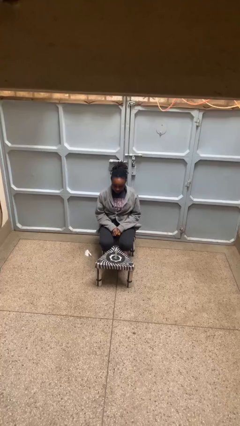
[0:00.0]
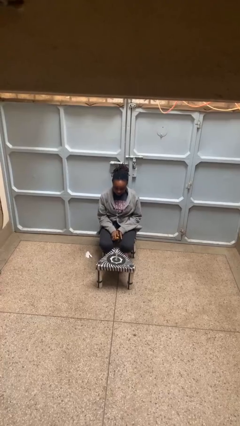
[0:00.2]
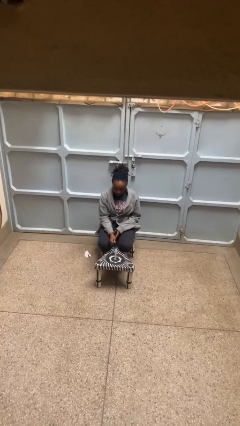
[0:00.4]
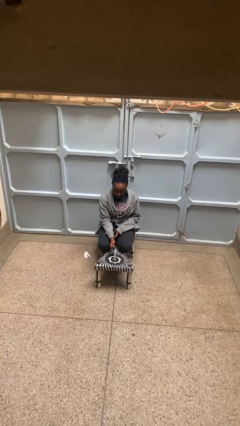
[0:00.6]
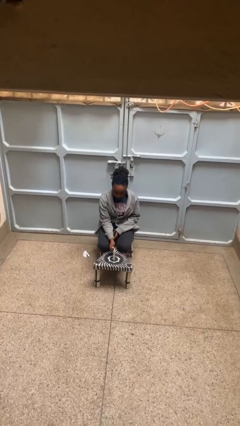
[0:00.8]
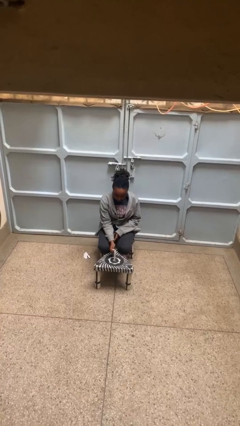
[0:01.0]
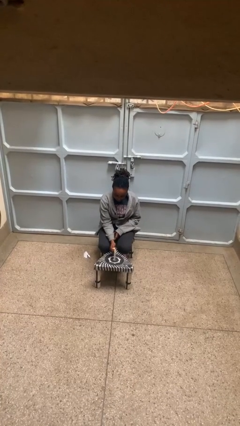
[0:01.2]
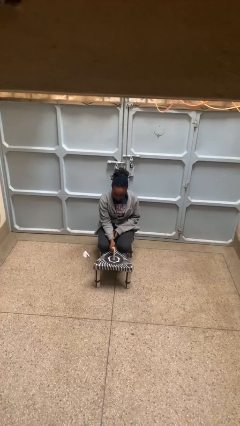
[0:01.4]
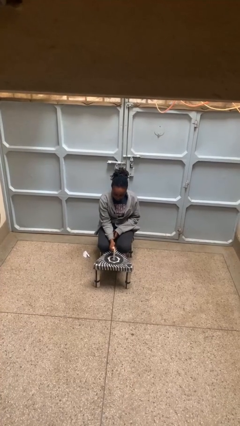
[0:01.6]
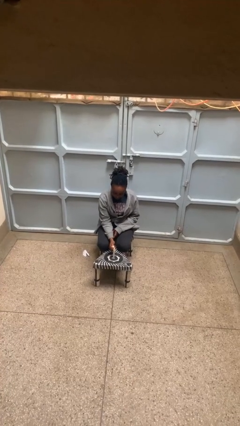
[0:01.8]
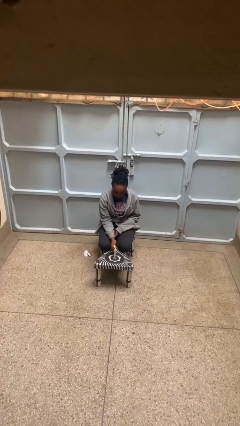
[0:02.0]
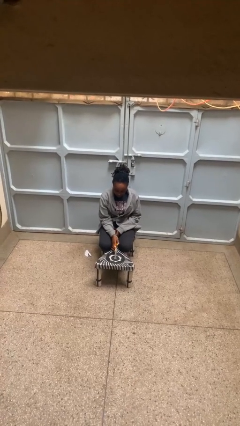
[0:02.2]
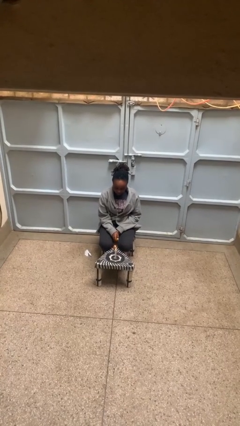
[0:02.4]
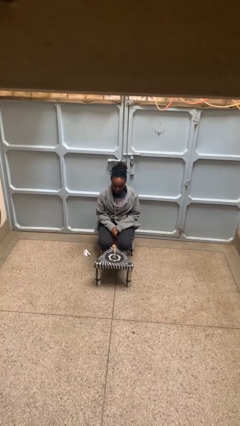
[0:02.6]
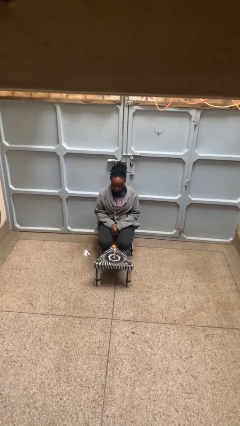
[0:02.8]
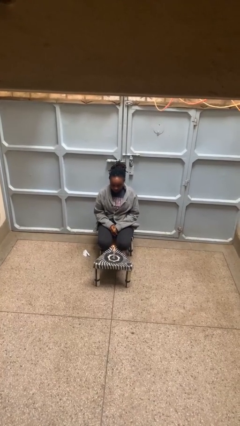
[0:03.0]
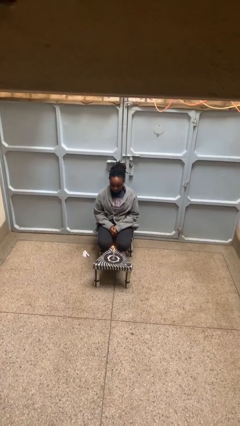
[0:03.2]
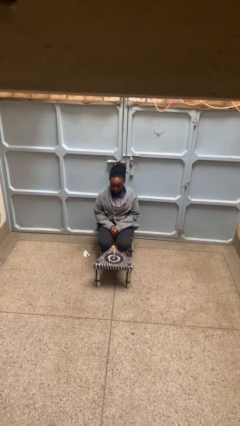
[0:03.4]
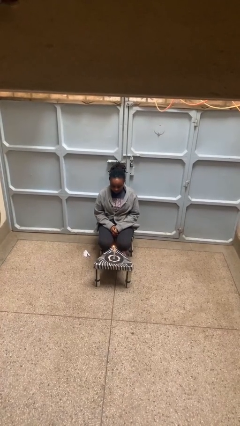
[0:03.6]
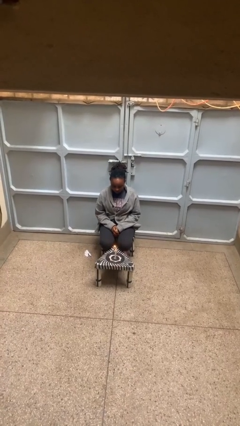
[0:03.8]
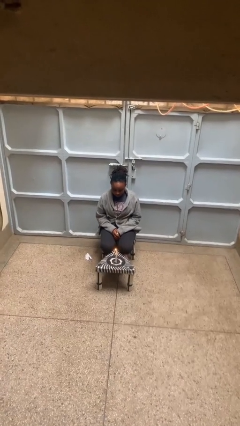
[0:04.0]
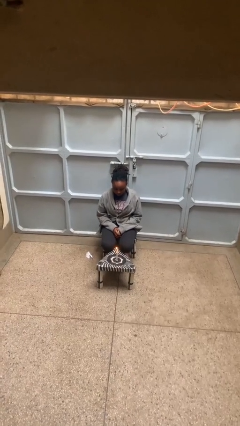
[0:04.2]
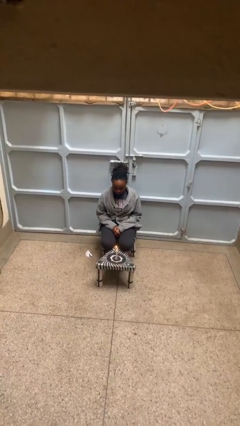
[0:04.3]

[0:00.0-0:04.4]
person lights candle

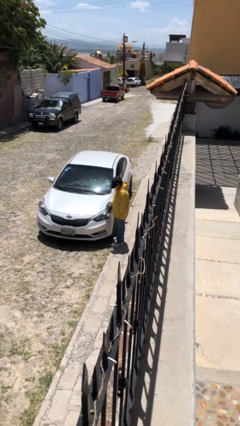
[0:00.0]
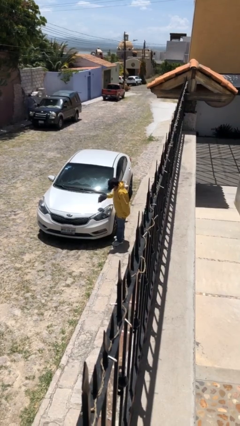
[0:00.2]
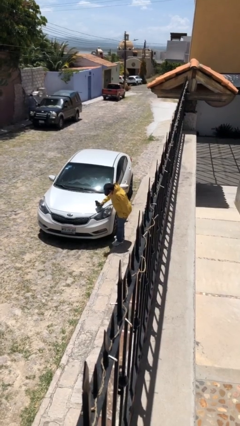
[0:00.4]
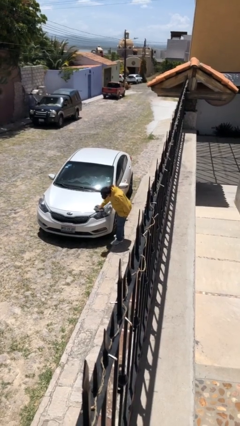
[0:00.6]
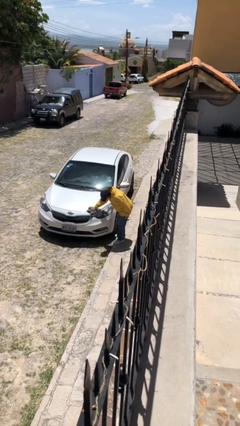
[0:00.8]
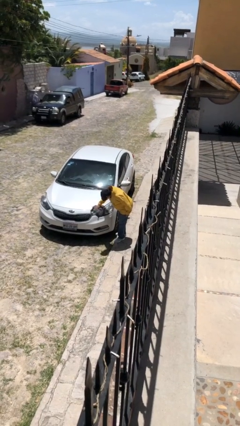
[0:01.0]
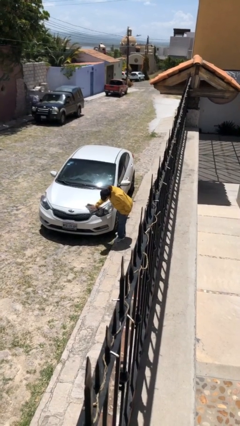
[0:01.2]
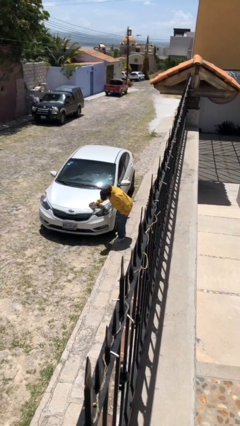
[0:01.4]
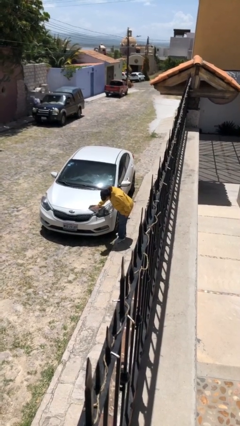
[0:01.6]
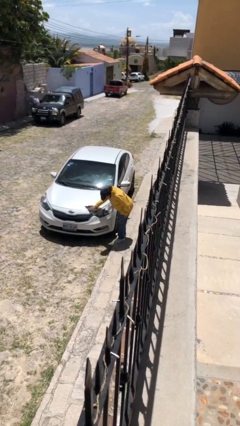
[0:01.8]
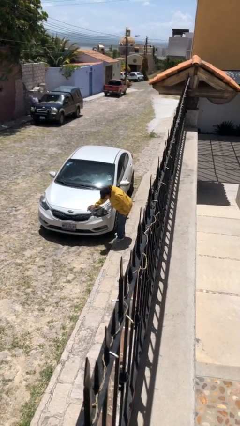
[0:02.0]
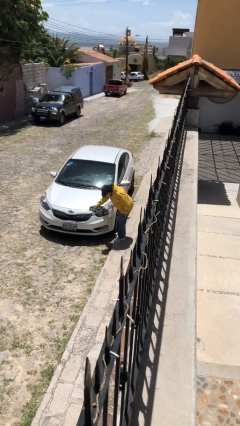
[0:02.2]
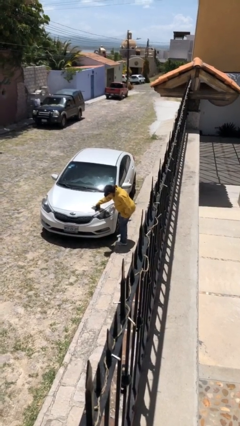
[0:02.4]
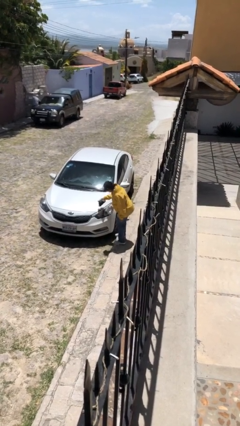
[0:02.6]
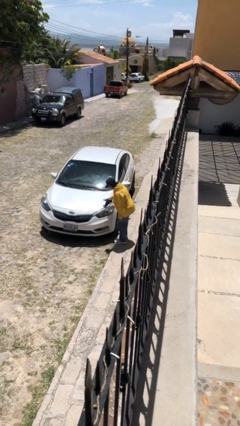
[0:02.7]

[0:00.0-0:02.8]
person polishes car with rag

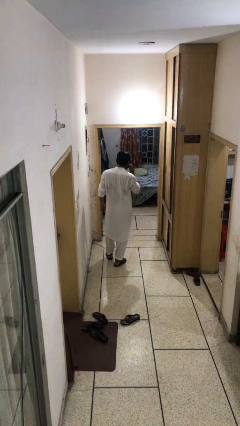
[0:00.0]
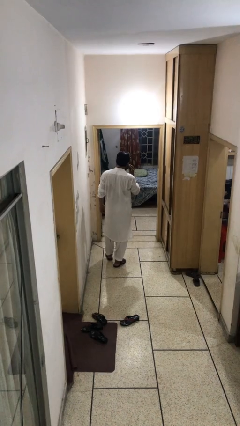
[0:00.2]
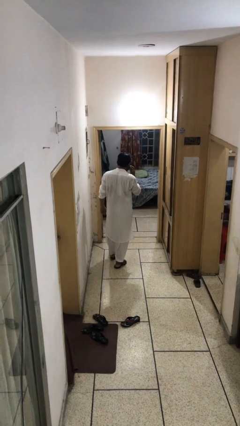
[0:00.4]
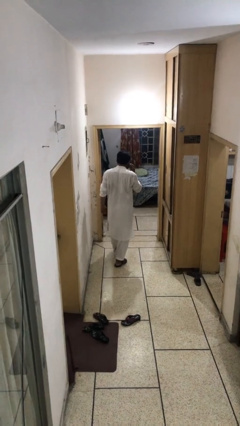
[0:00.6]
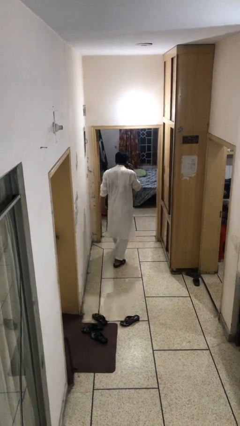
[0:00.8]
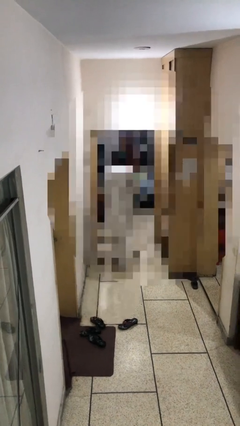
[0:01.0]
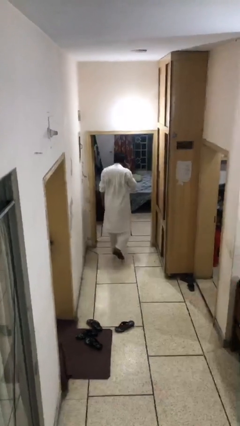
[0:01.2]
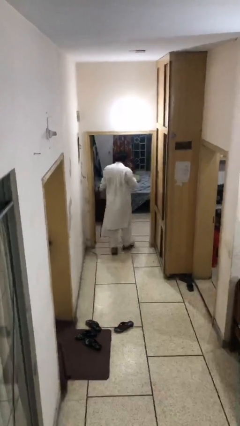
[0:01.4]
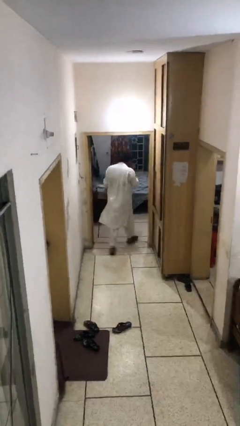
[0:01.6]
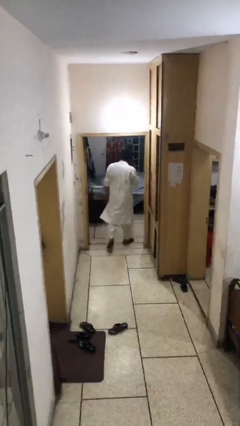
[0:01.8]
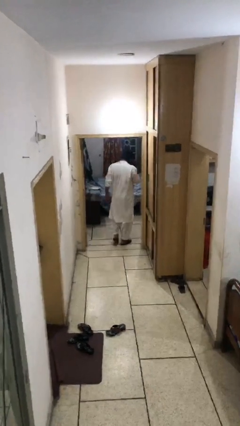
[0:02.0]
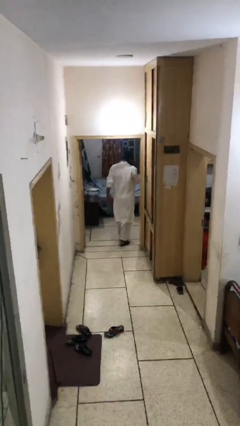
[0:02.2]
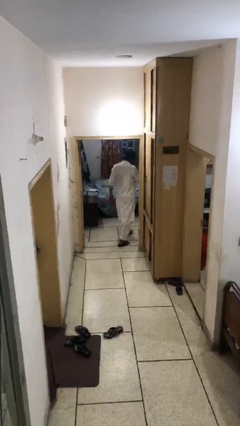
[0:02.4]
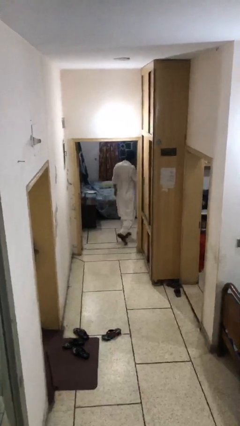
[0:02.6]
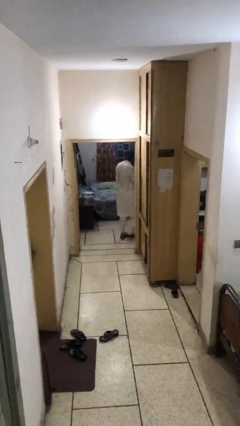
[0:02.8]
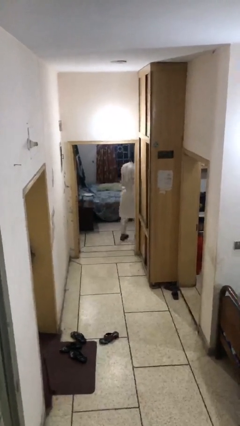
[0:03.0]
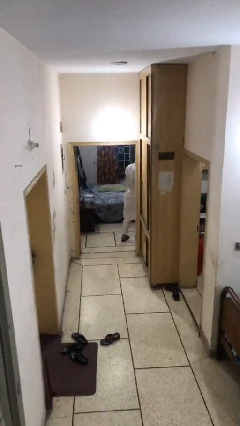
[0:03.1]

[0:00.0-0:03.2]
person exits scene through structure

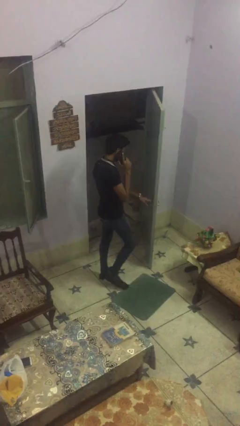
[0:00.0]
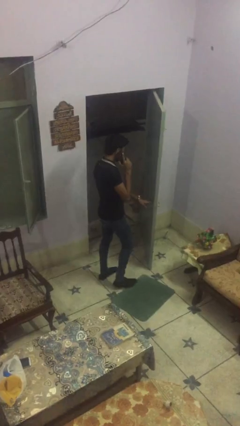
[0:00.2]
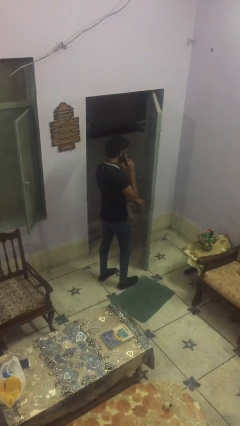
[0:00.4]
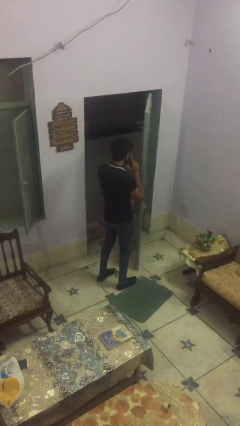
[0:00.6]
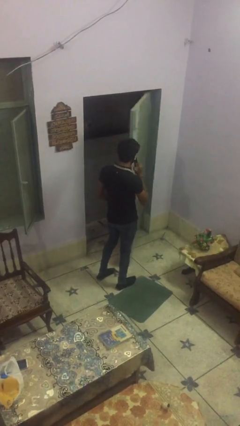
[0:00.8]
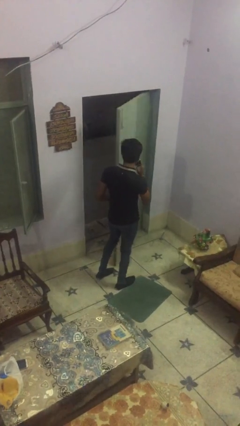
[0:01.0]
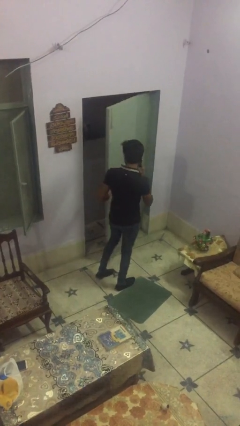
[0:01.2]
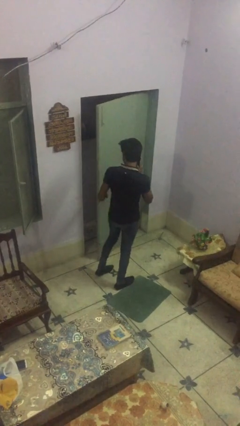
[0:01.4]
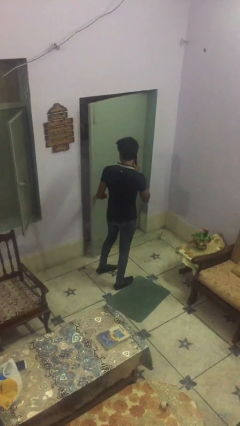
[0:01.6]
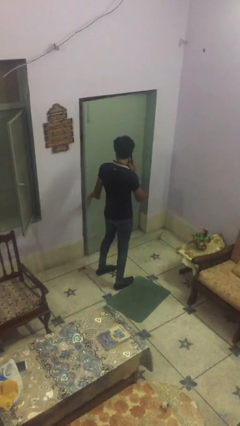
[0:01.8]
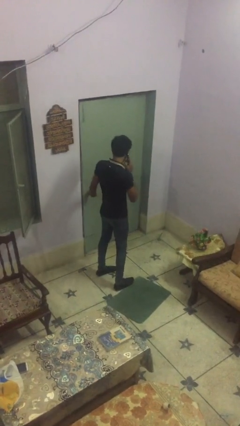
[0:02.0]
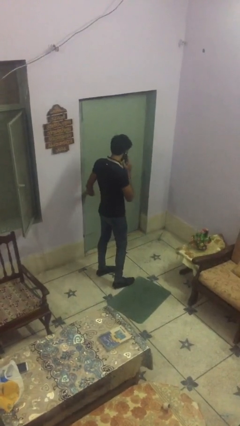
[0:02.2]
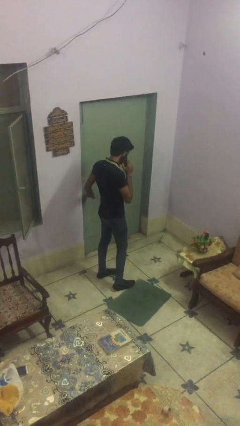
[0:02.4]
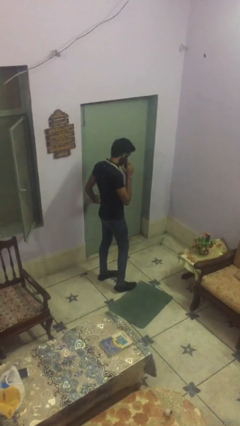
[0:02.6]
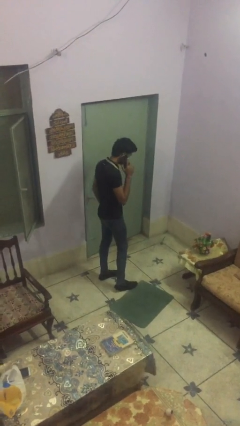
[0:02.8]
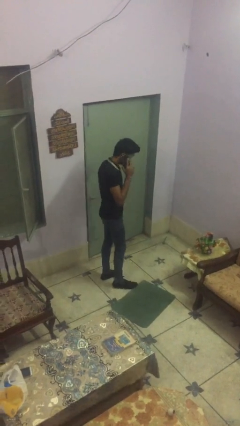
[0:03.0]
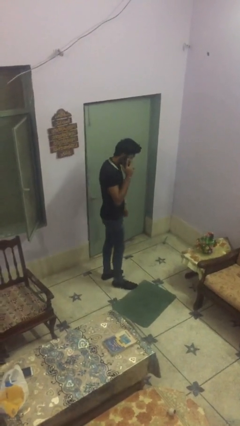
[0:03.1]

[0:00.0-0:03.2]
person closes facility door

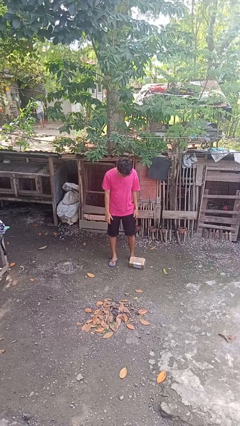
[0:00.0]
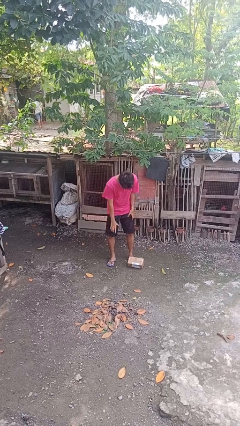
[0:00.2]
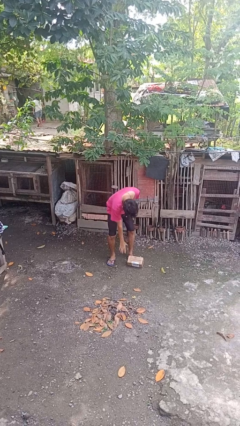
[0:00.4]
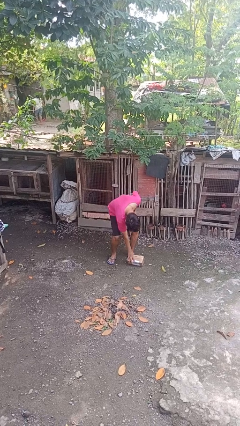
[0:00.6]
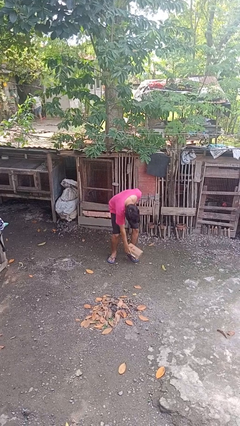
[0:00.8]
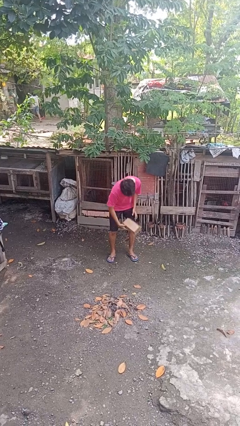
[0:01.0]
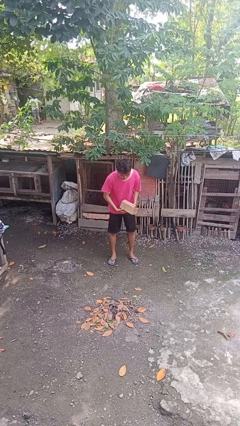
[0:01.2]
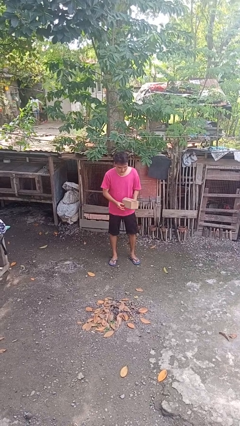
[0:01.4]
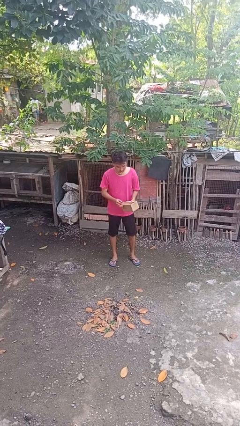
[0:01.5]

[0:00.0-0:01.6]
person picks up object from floor

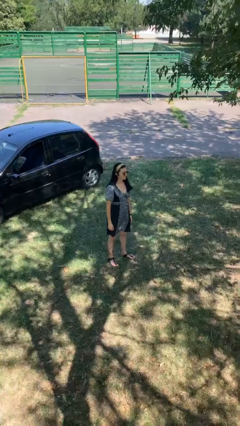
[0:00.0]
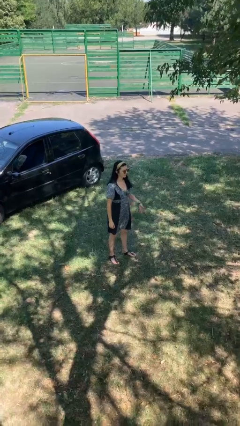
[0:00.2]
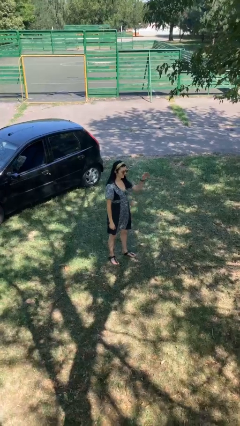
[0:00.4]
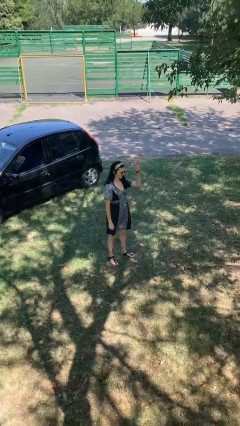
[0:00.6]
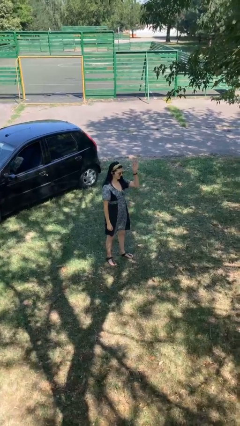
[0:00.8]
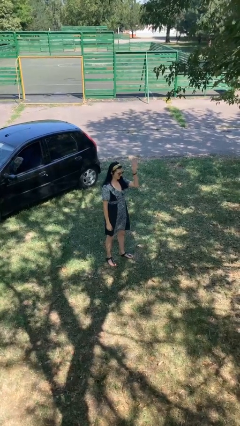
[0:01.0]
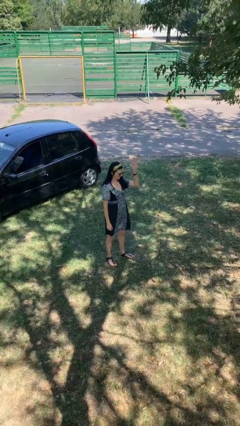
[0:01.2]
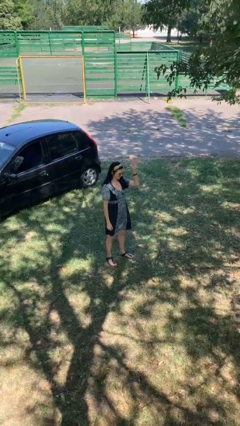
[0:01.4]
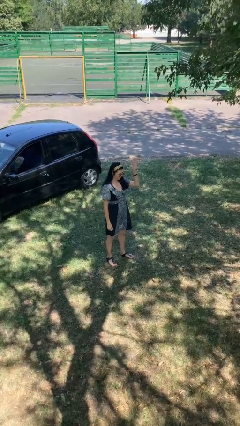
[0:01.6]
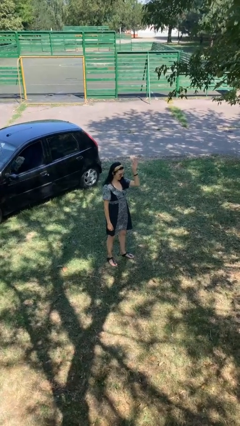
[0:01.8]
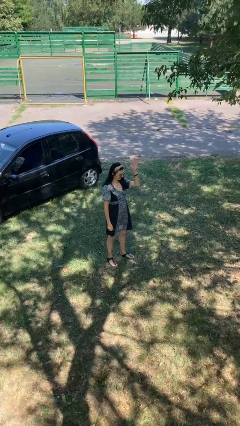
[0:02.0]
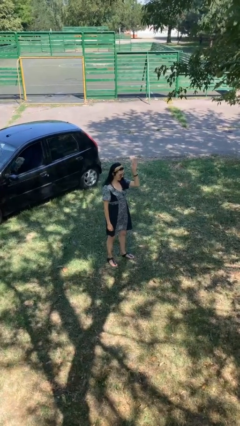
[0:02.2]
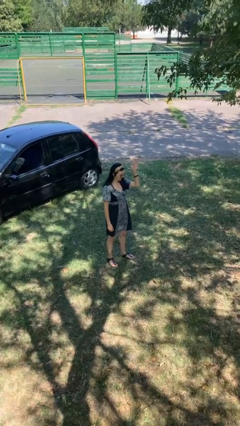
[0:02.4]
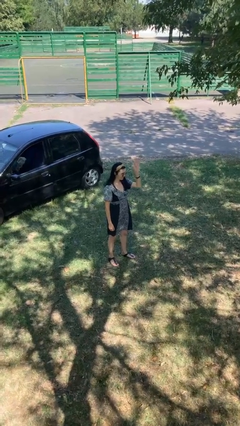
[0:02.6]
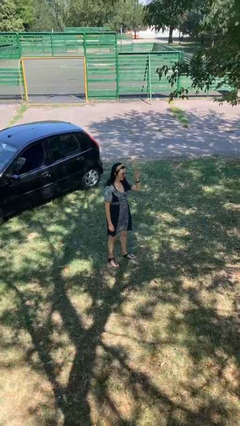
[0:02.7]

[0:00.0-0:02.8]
person waves at person
